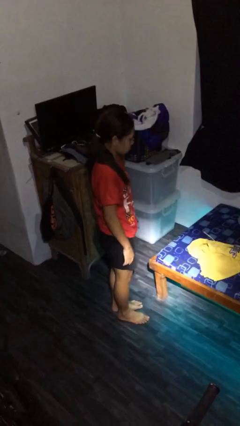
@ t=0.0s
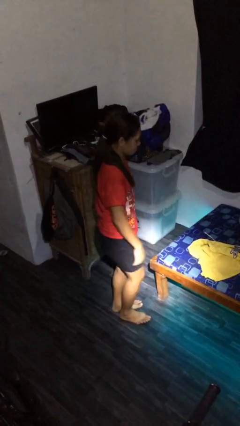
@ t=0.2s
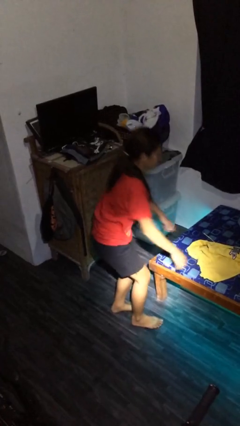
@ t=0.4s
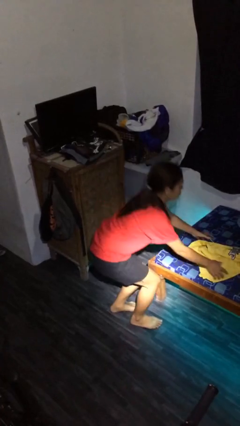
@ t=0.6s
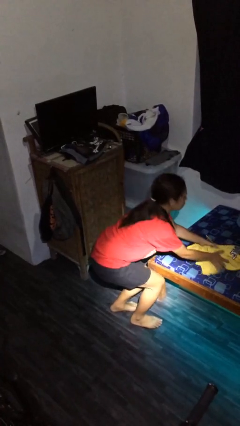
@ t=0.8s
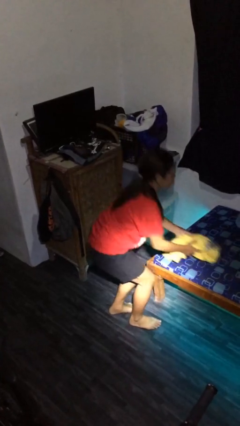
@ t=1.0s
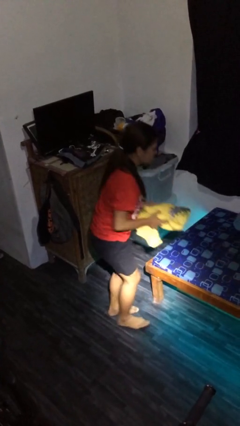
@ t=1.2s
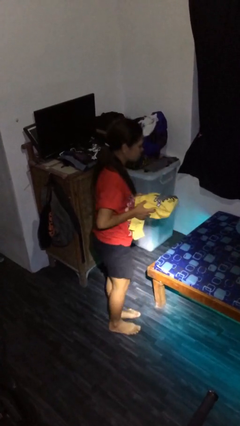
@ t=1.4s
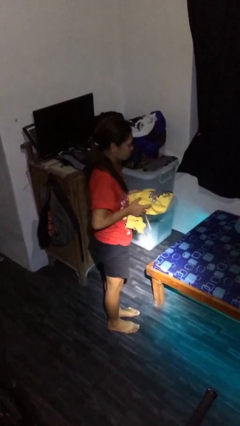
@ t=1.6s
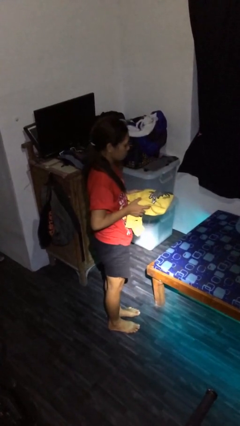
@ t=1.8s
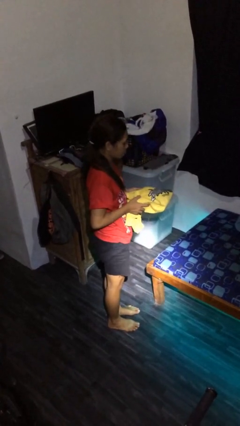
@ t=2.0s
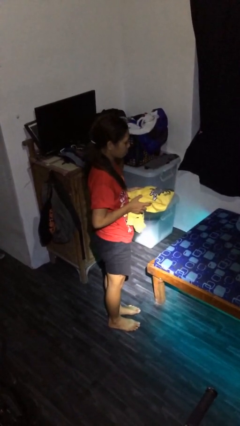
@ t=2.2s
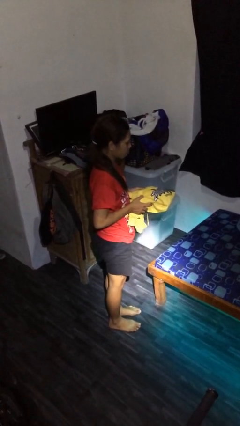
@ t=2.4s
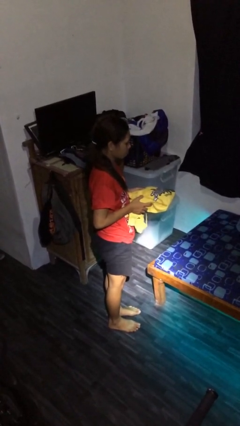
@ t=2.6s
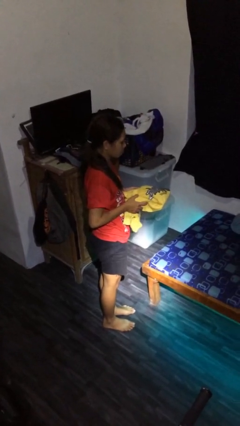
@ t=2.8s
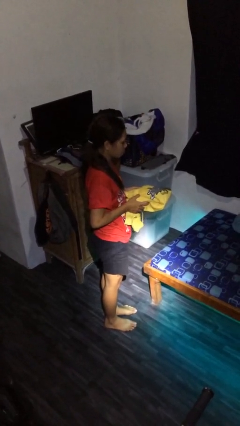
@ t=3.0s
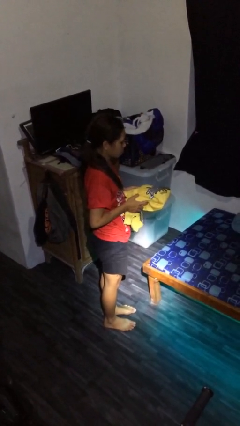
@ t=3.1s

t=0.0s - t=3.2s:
person picks up object from bed

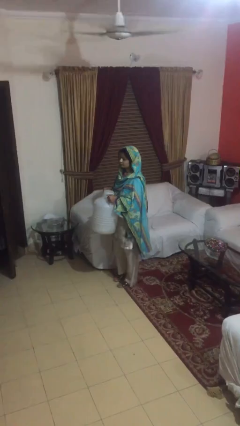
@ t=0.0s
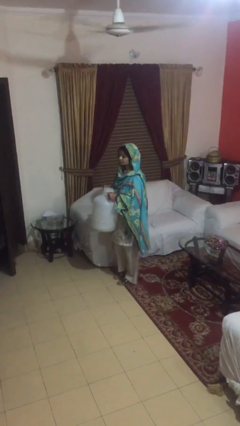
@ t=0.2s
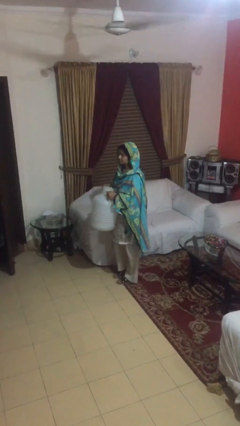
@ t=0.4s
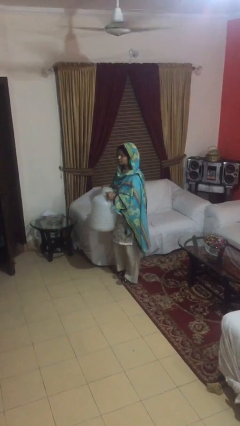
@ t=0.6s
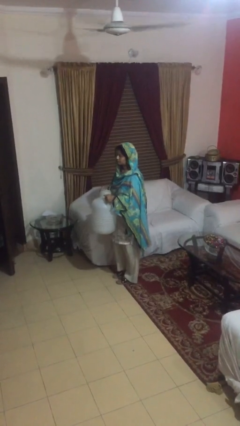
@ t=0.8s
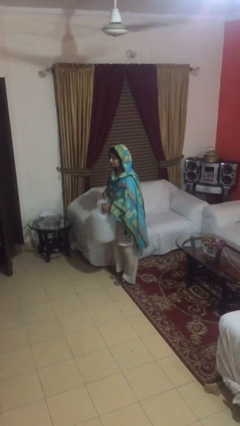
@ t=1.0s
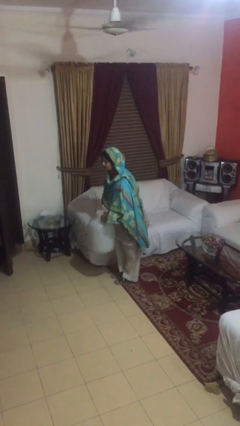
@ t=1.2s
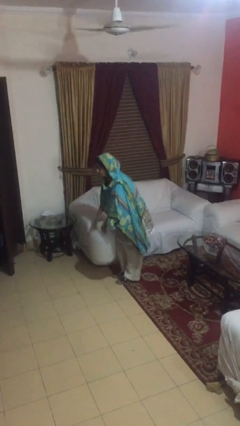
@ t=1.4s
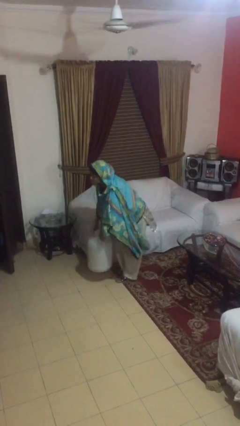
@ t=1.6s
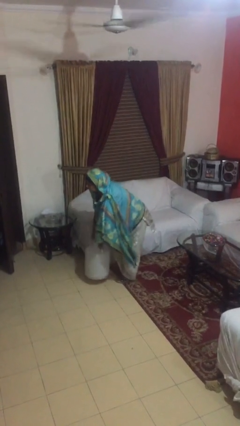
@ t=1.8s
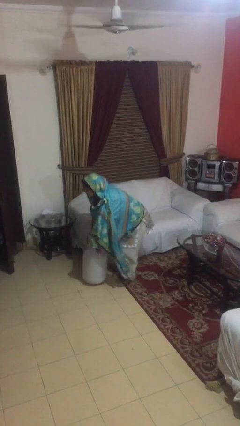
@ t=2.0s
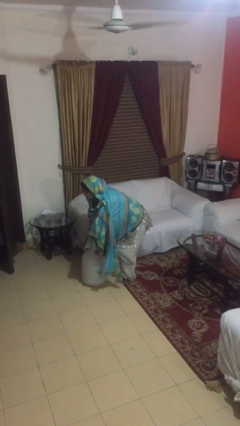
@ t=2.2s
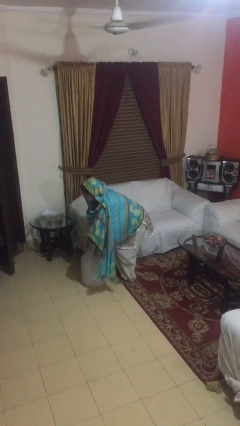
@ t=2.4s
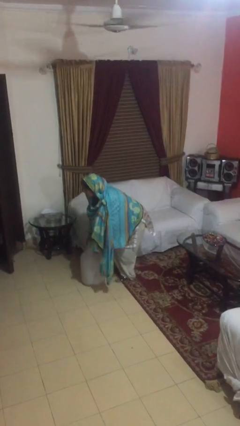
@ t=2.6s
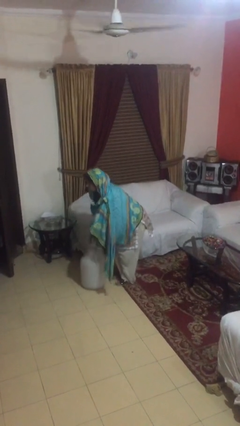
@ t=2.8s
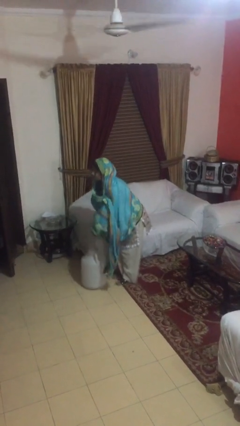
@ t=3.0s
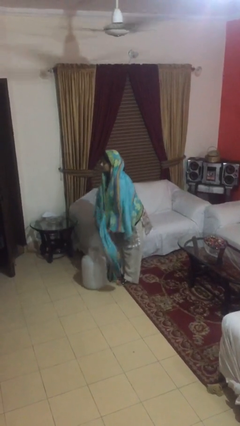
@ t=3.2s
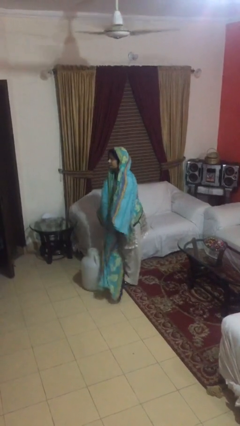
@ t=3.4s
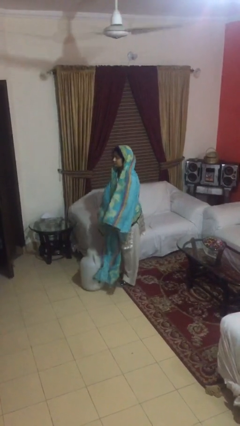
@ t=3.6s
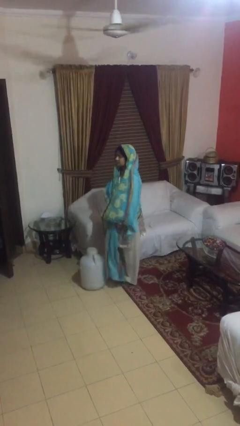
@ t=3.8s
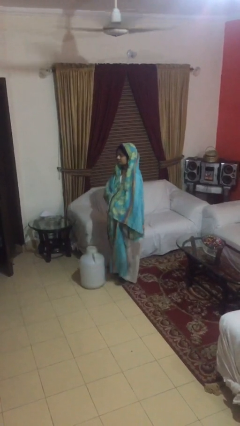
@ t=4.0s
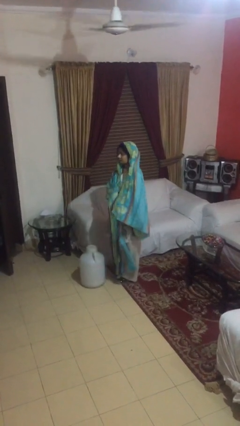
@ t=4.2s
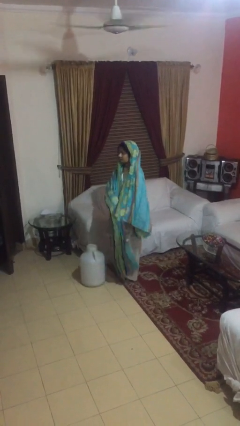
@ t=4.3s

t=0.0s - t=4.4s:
person puts down object on floor

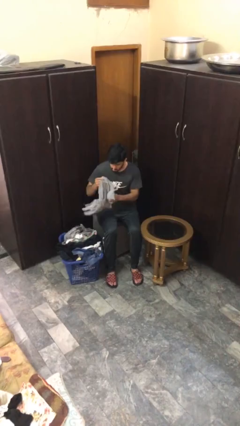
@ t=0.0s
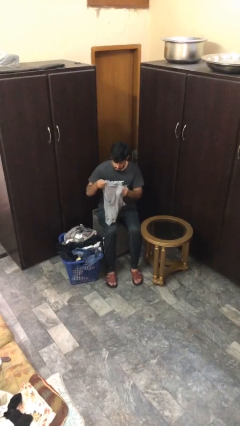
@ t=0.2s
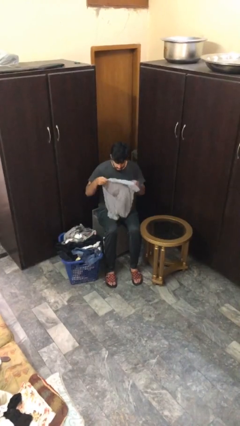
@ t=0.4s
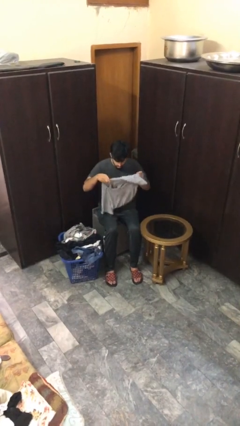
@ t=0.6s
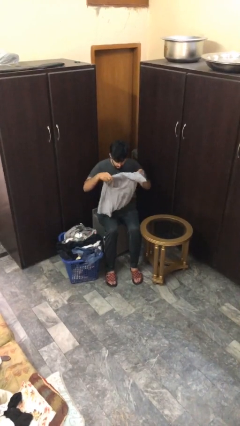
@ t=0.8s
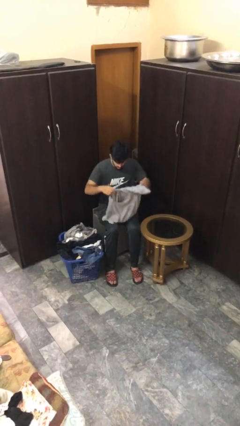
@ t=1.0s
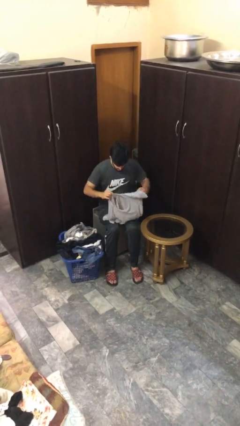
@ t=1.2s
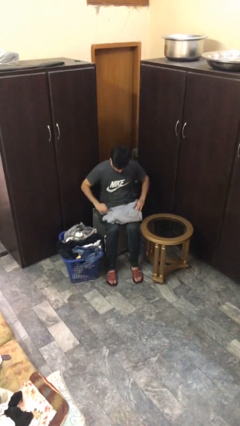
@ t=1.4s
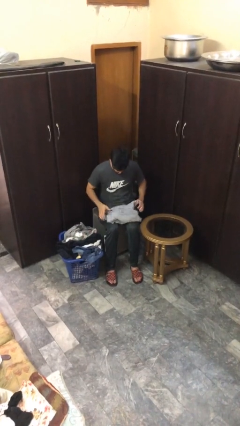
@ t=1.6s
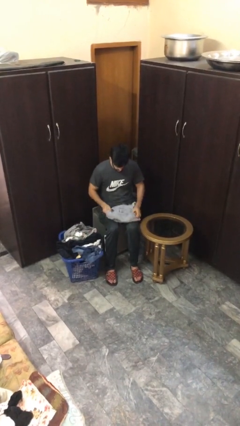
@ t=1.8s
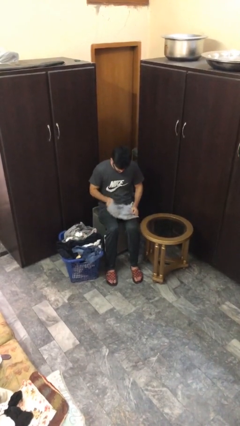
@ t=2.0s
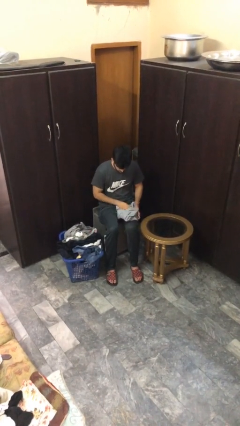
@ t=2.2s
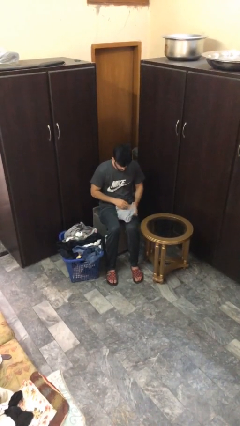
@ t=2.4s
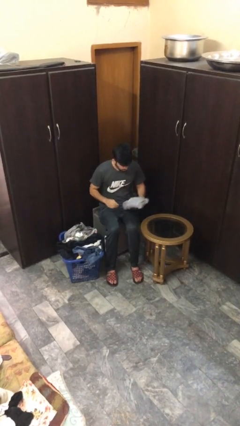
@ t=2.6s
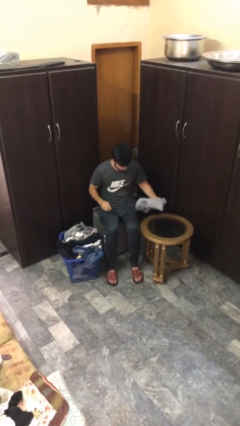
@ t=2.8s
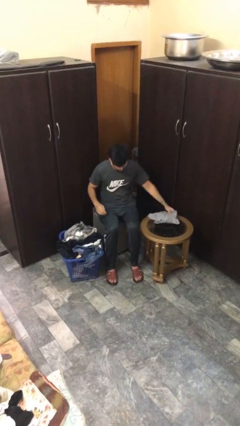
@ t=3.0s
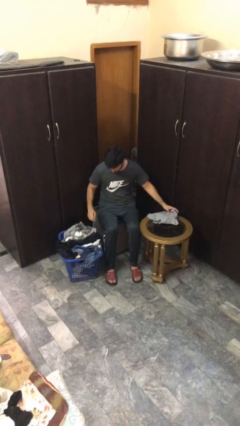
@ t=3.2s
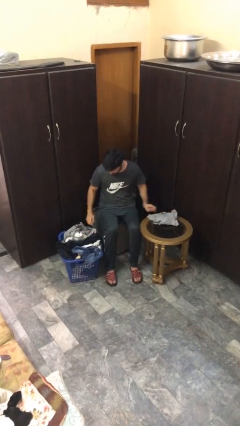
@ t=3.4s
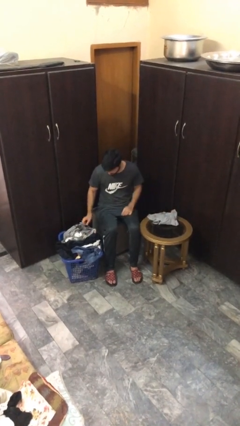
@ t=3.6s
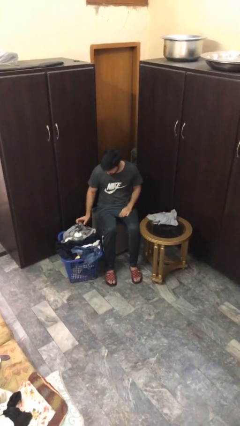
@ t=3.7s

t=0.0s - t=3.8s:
person folds shirt

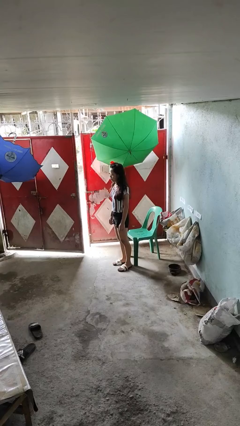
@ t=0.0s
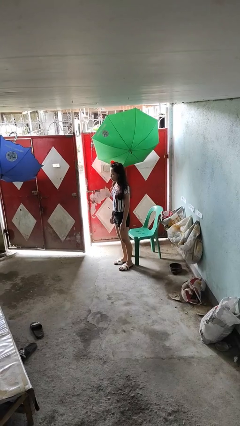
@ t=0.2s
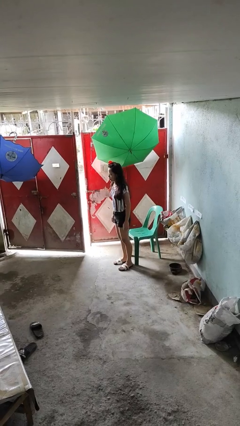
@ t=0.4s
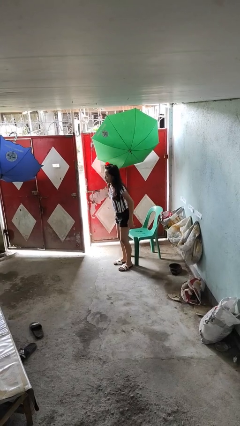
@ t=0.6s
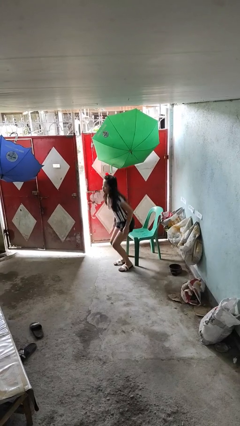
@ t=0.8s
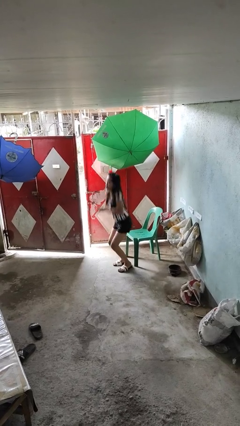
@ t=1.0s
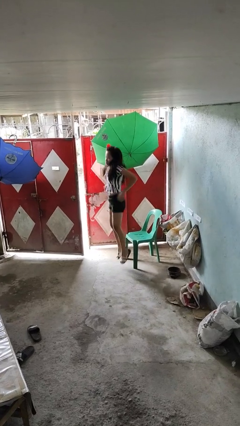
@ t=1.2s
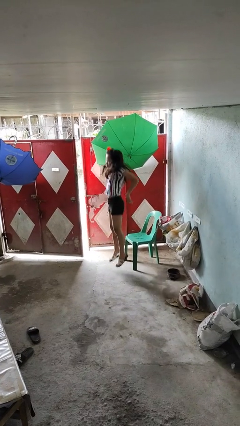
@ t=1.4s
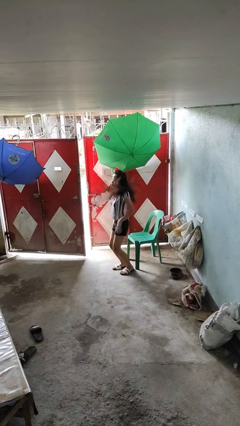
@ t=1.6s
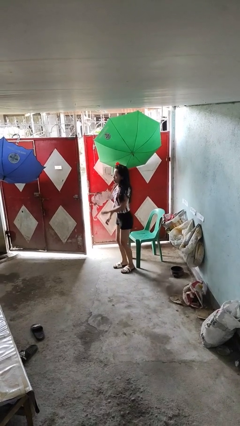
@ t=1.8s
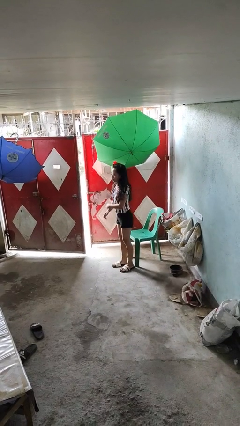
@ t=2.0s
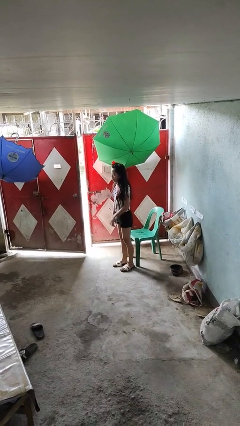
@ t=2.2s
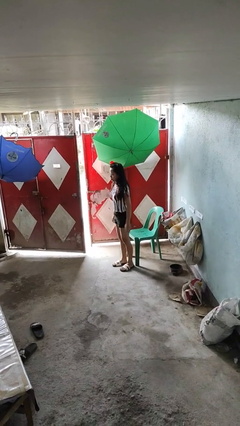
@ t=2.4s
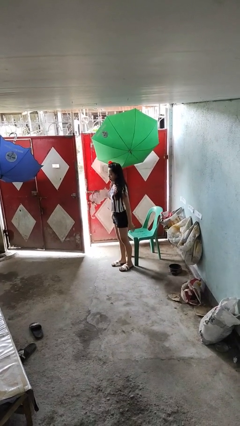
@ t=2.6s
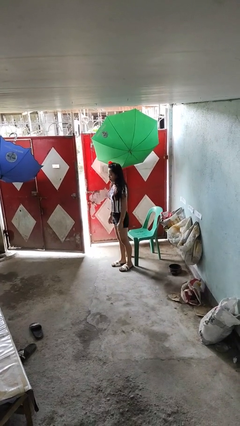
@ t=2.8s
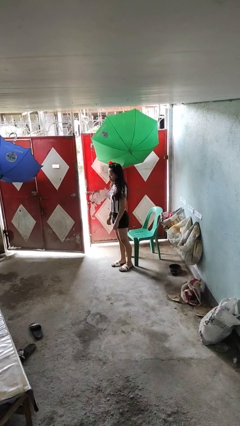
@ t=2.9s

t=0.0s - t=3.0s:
person jumps

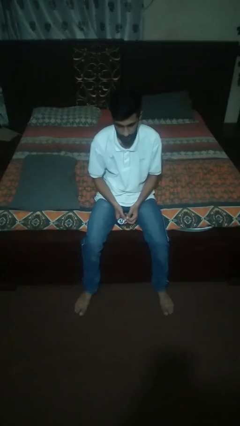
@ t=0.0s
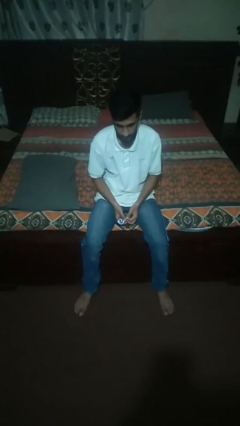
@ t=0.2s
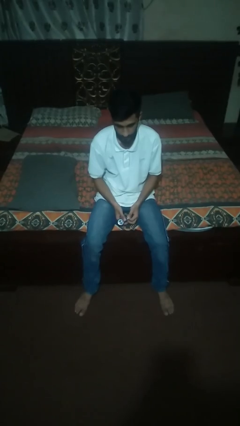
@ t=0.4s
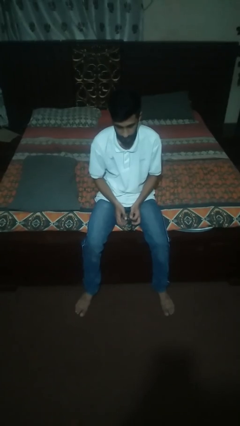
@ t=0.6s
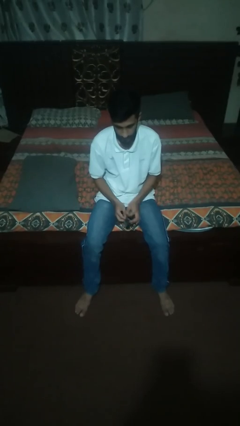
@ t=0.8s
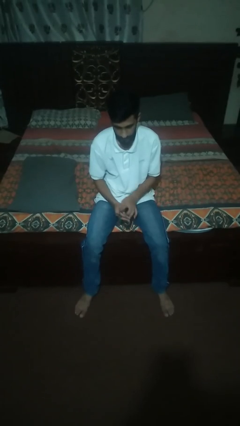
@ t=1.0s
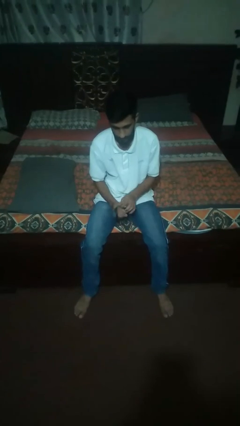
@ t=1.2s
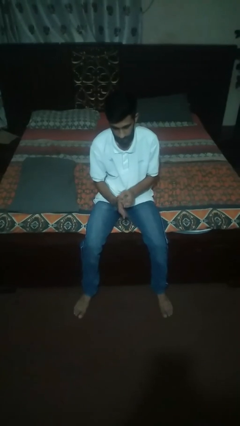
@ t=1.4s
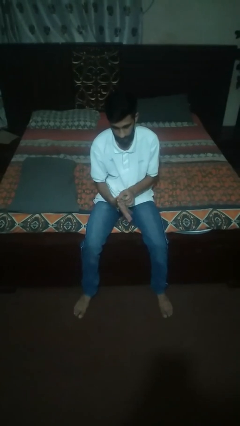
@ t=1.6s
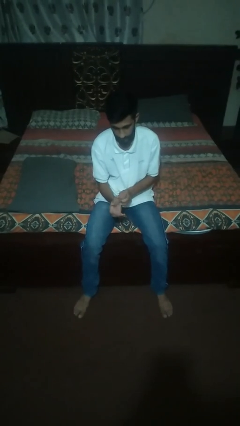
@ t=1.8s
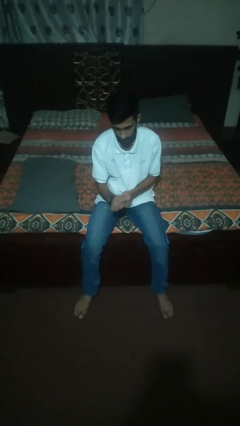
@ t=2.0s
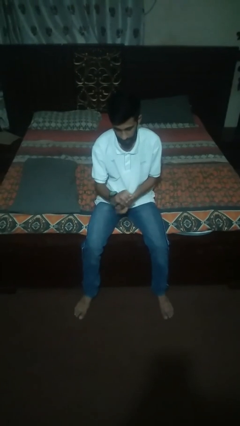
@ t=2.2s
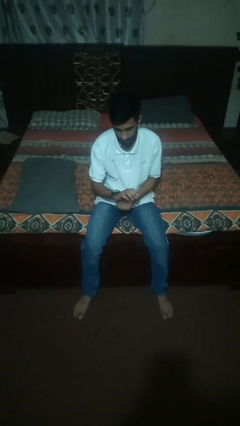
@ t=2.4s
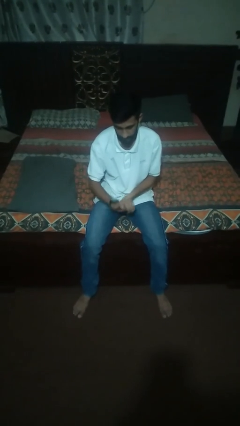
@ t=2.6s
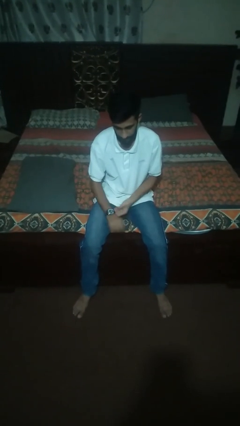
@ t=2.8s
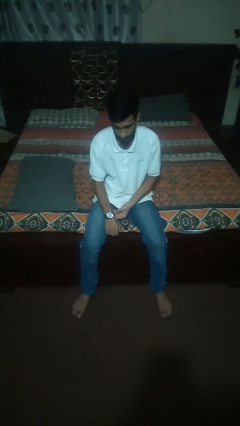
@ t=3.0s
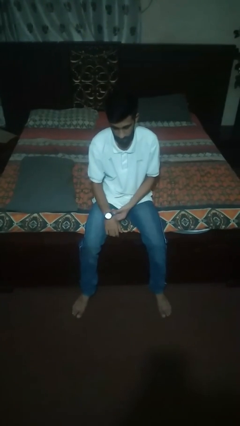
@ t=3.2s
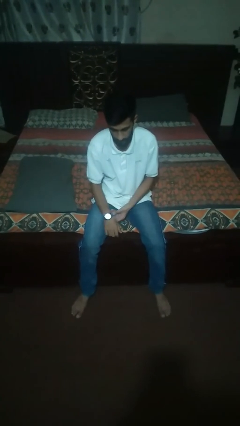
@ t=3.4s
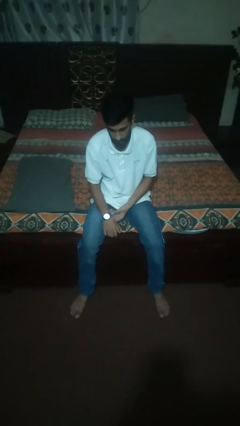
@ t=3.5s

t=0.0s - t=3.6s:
person puts on wristwatch
